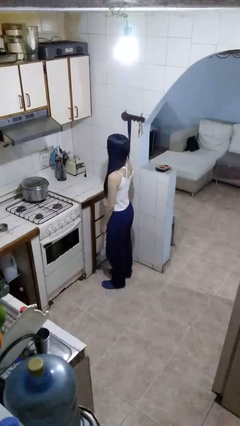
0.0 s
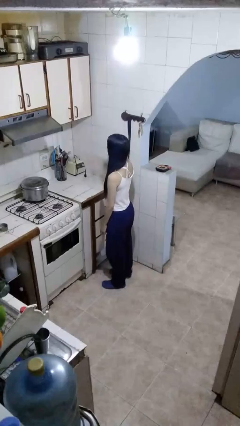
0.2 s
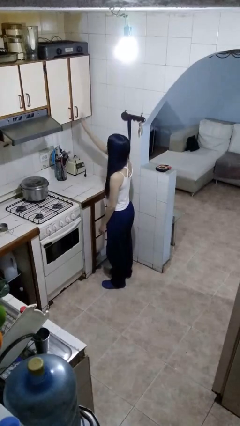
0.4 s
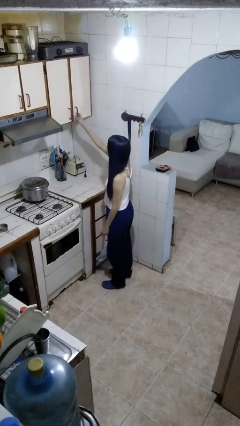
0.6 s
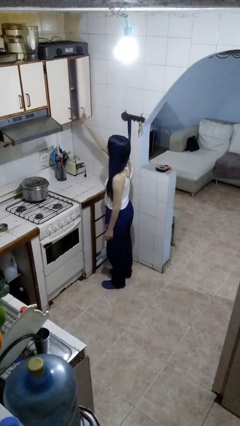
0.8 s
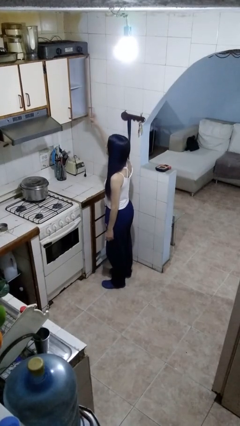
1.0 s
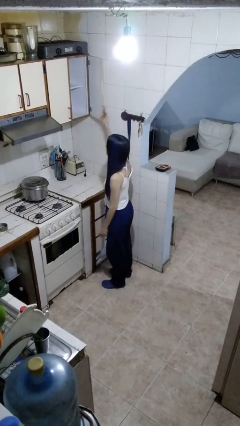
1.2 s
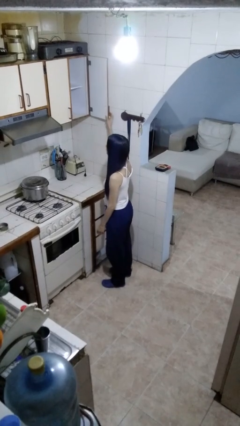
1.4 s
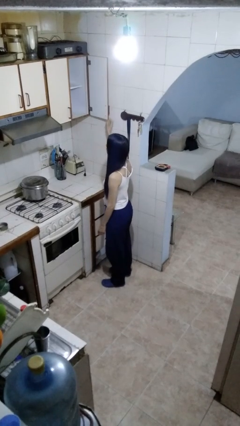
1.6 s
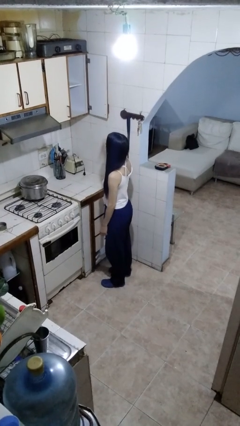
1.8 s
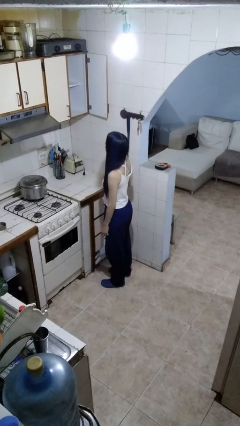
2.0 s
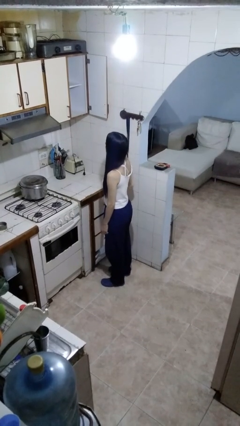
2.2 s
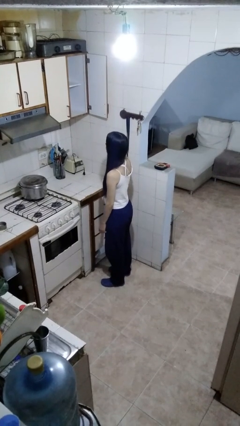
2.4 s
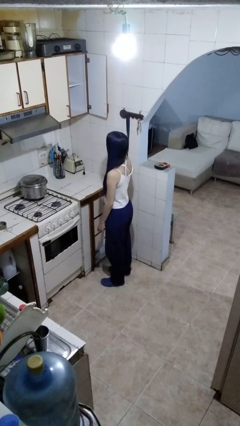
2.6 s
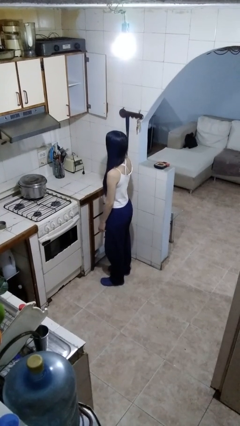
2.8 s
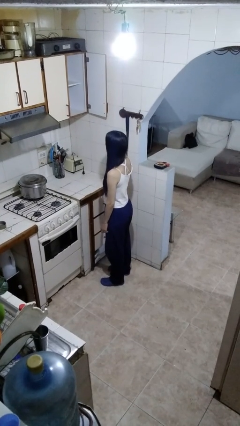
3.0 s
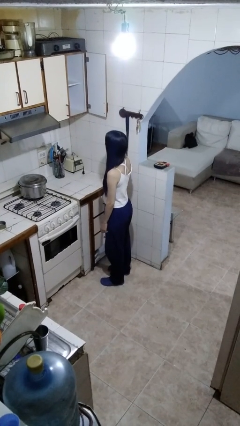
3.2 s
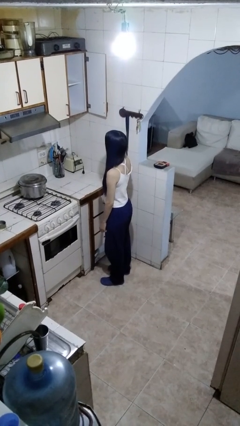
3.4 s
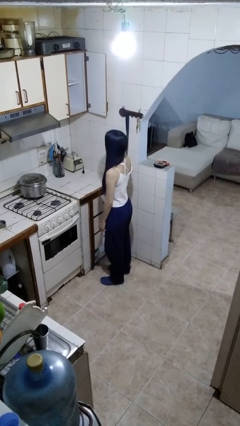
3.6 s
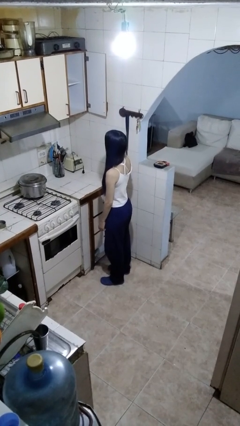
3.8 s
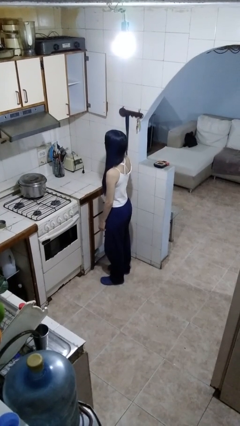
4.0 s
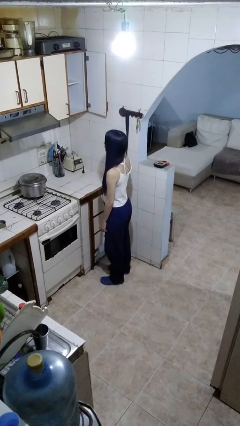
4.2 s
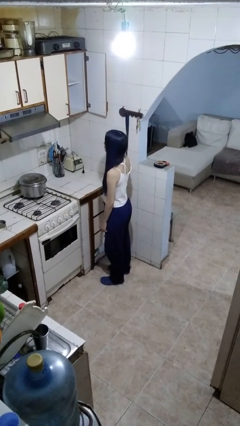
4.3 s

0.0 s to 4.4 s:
person opens cabinet

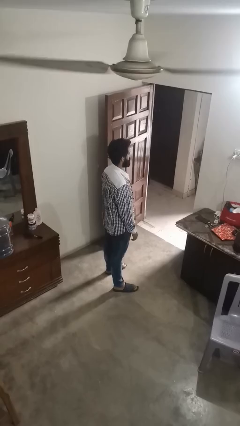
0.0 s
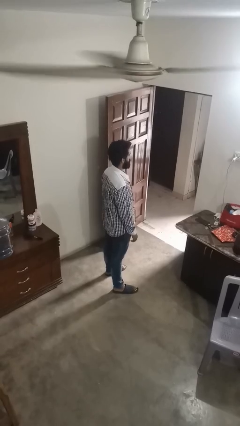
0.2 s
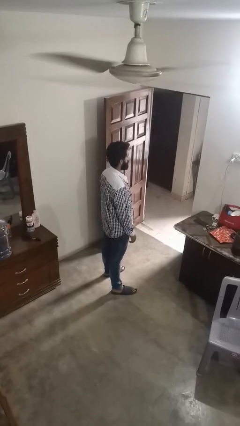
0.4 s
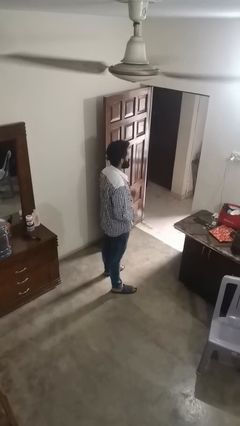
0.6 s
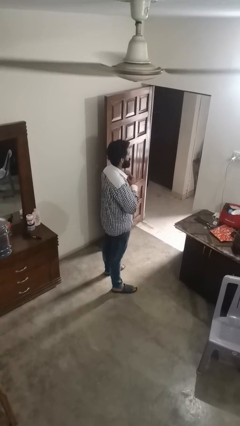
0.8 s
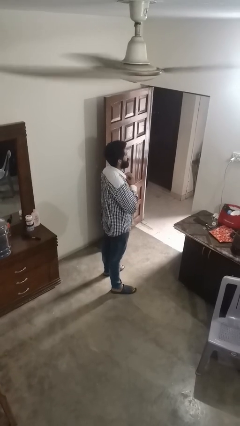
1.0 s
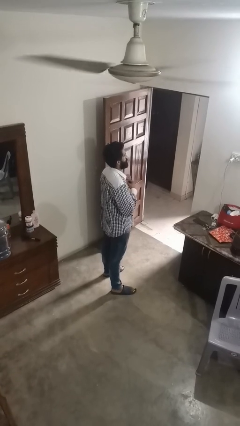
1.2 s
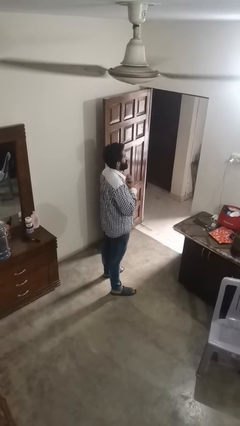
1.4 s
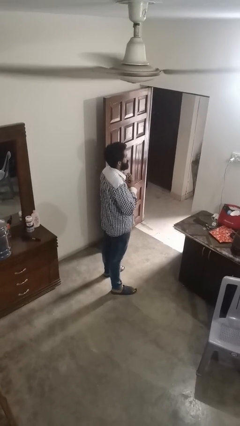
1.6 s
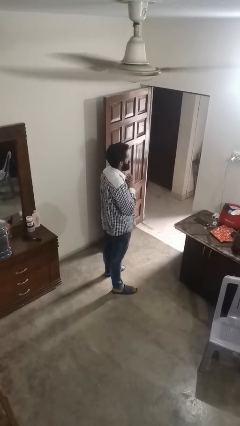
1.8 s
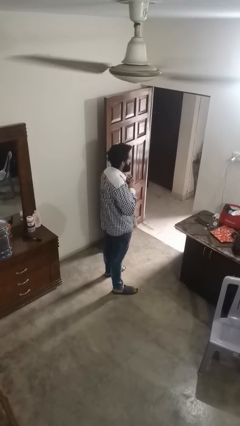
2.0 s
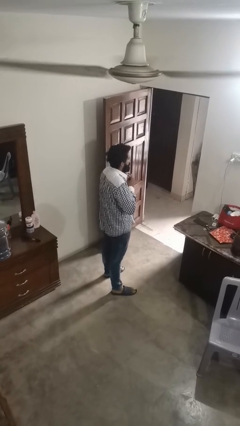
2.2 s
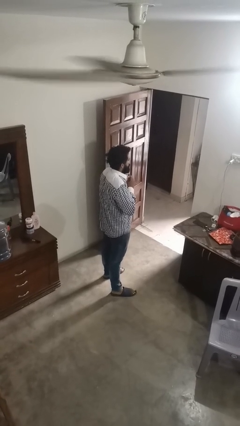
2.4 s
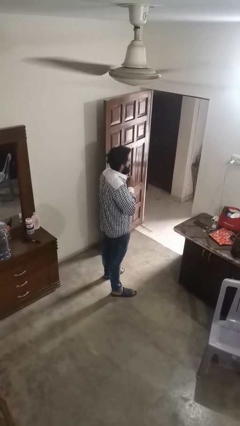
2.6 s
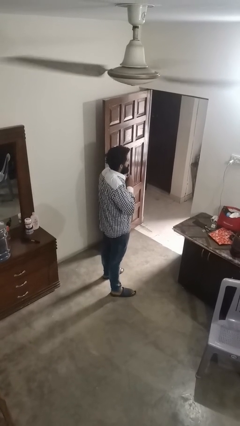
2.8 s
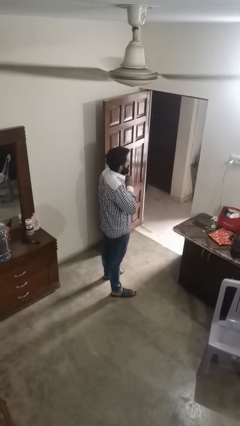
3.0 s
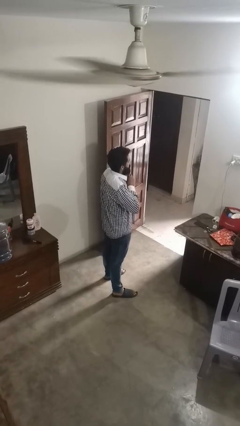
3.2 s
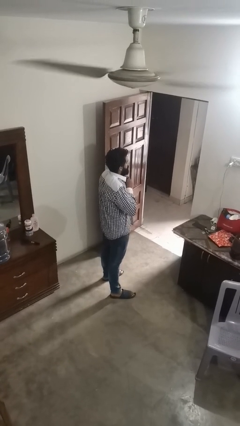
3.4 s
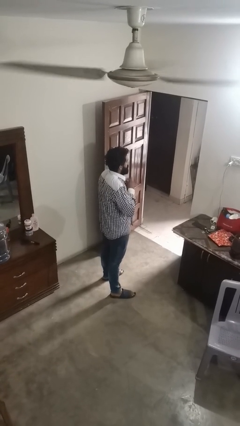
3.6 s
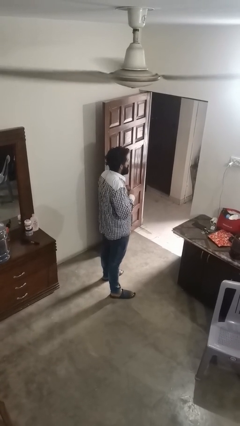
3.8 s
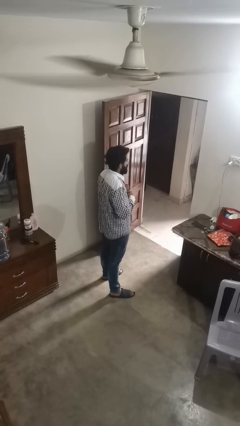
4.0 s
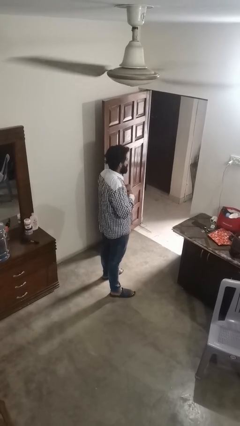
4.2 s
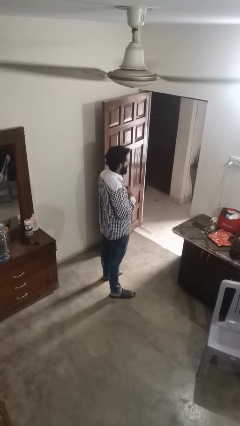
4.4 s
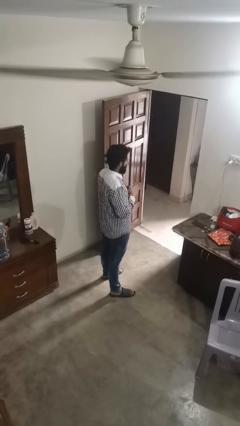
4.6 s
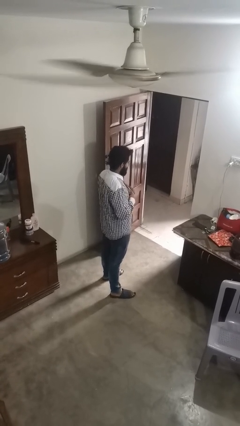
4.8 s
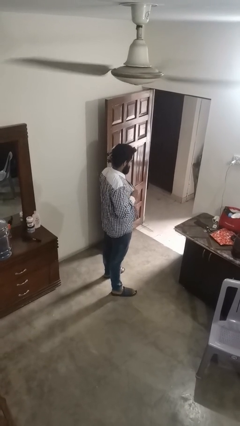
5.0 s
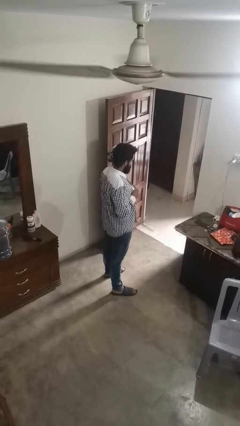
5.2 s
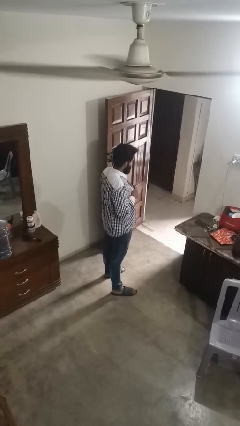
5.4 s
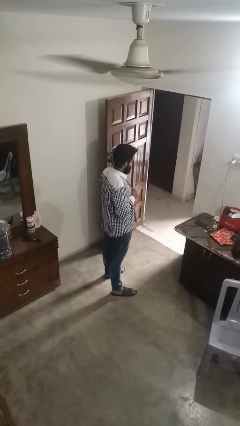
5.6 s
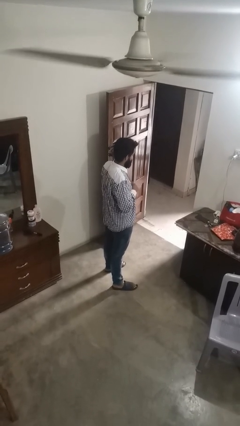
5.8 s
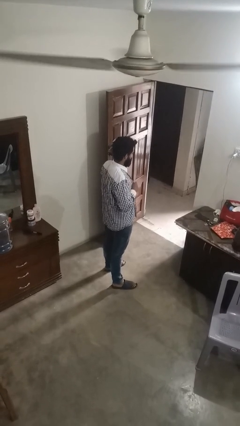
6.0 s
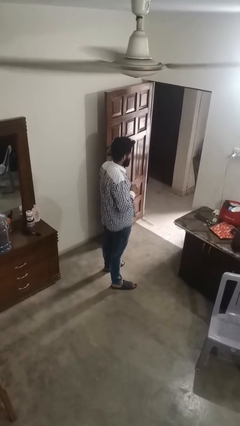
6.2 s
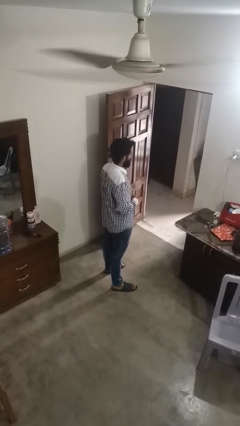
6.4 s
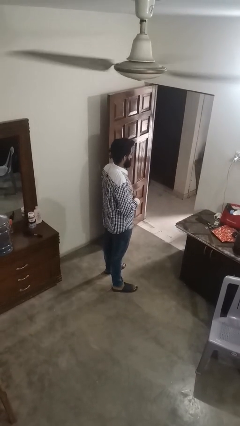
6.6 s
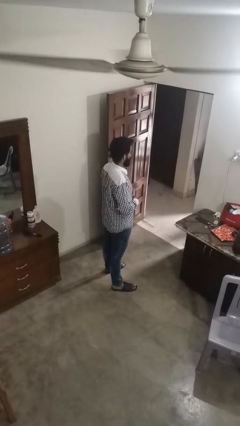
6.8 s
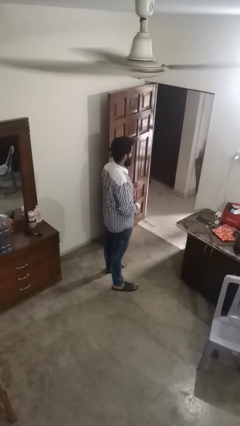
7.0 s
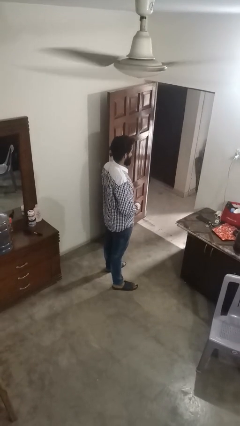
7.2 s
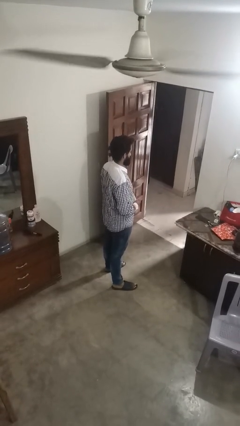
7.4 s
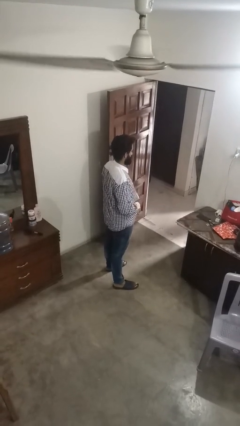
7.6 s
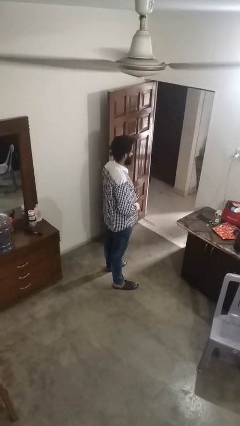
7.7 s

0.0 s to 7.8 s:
person buttons shirt

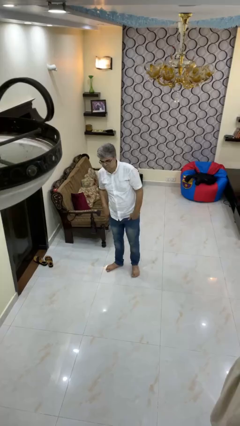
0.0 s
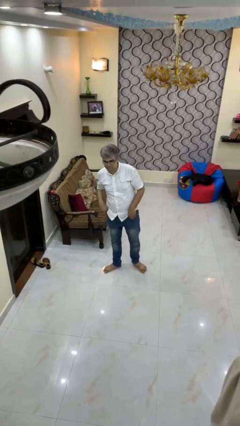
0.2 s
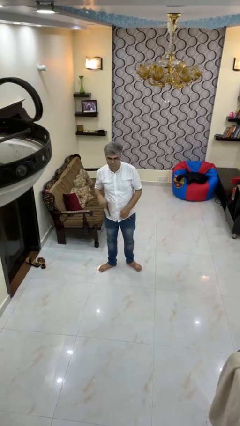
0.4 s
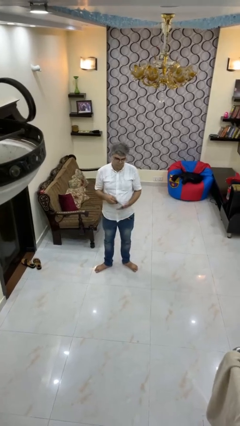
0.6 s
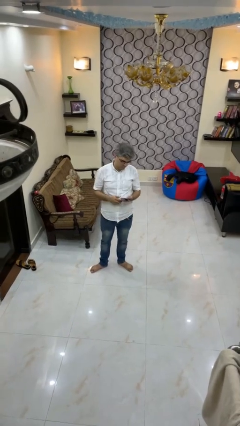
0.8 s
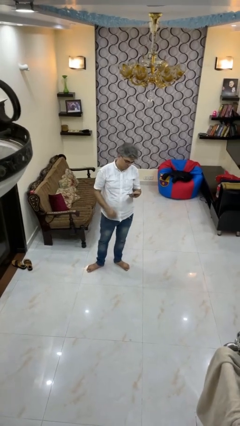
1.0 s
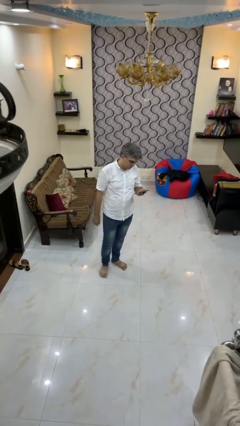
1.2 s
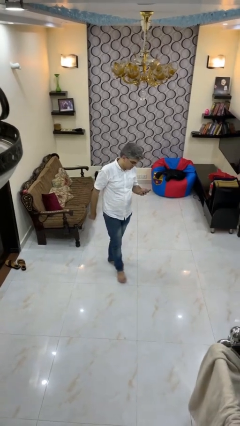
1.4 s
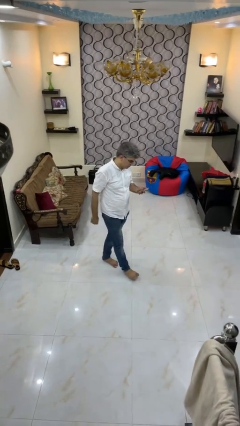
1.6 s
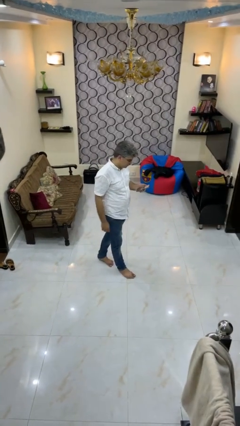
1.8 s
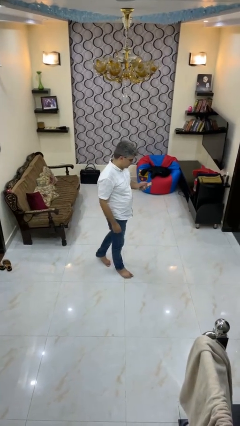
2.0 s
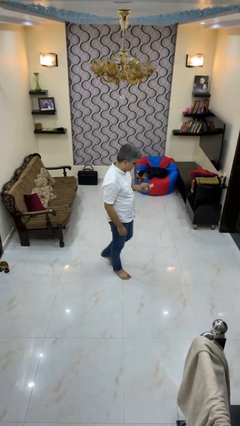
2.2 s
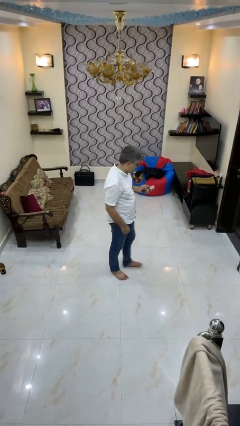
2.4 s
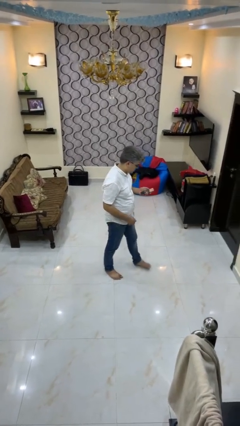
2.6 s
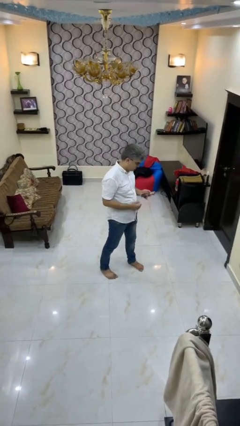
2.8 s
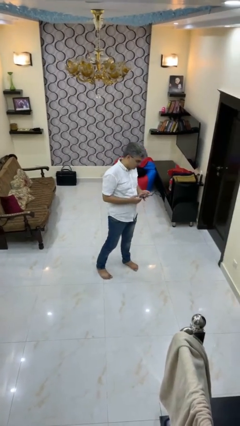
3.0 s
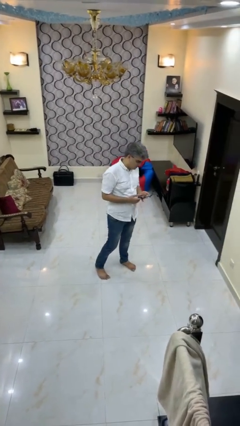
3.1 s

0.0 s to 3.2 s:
person takes phone from pocket

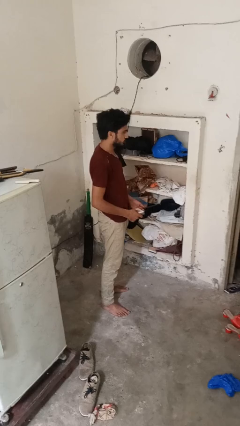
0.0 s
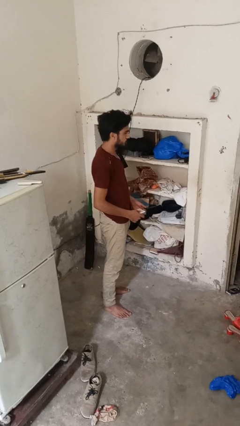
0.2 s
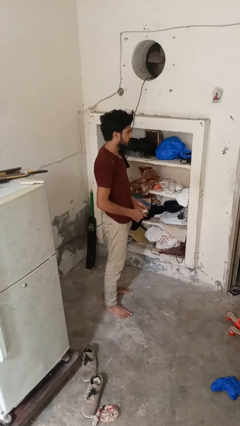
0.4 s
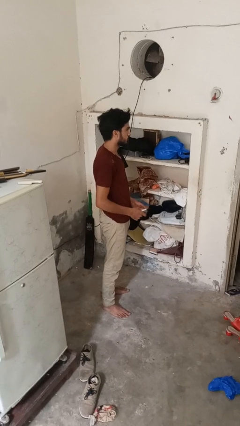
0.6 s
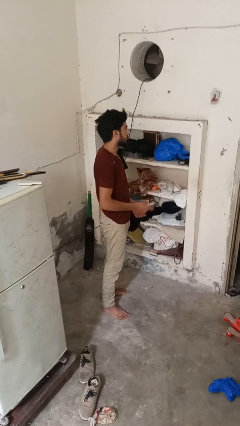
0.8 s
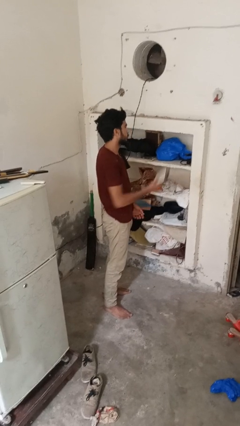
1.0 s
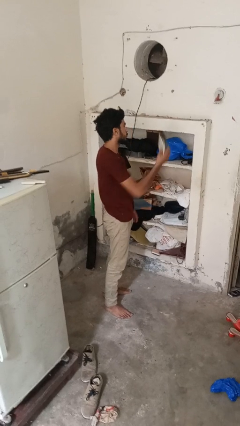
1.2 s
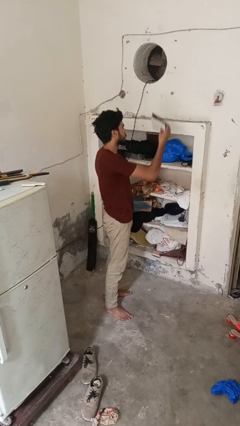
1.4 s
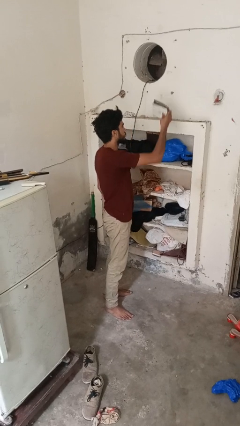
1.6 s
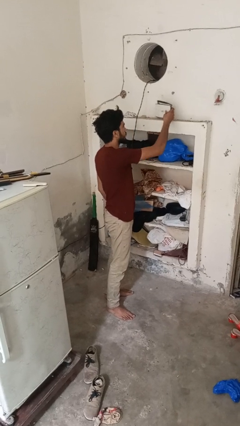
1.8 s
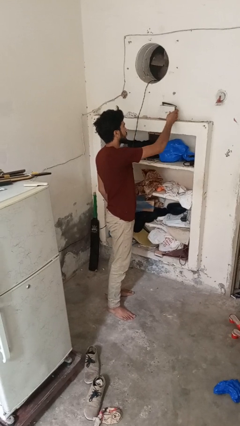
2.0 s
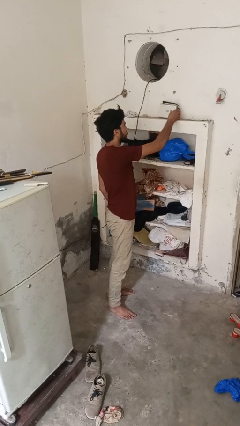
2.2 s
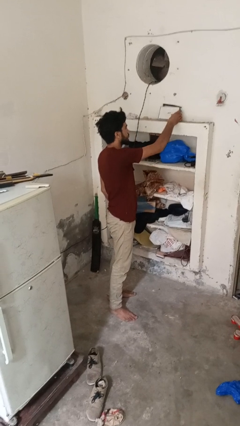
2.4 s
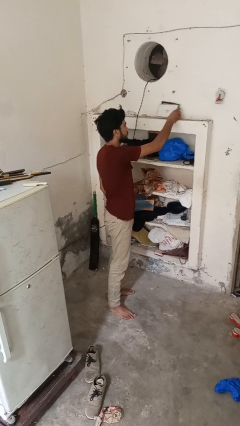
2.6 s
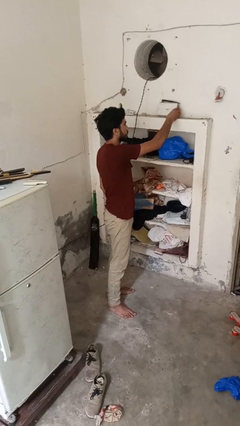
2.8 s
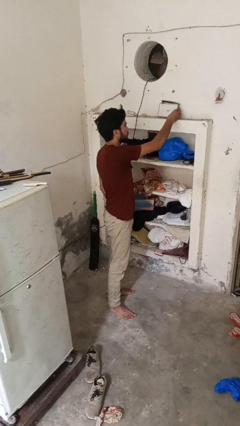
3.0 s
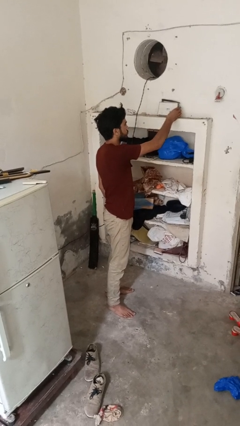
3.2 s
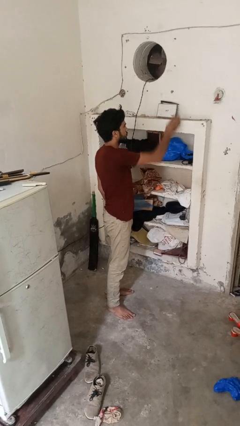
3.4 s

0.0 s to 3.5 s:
person puts down object on shelf
